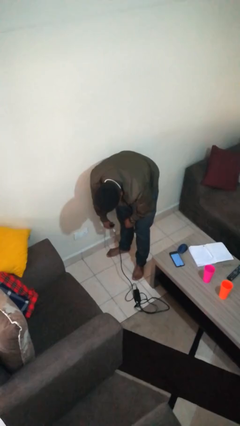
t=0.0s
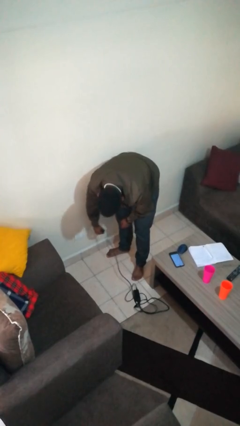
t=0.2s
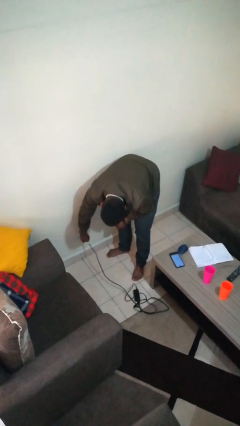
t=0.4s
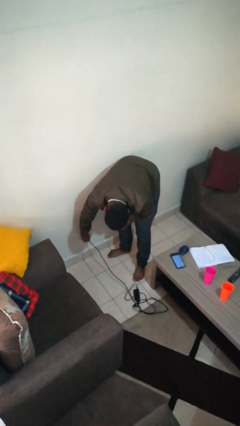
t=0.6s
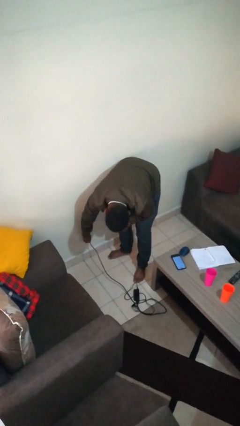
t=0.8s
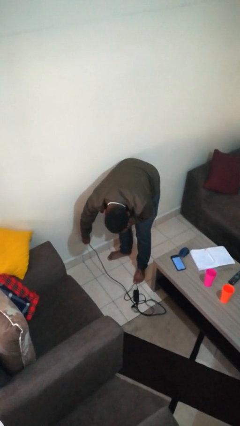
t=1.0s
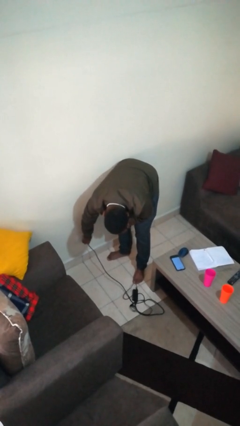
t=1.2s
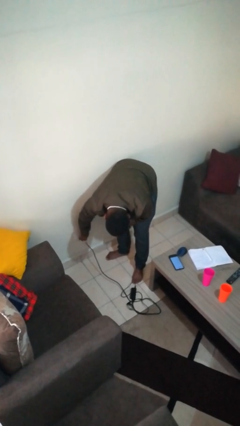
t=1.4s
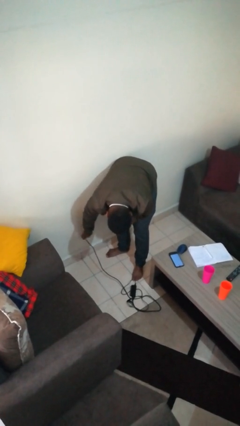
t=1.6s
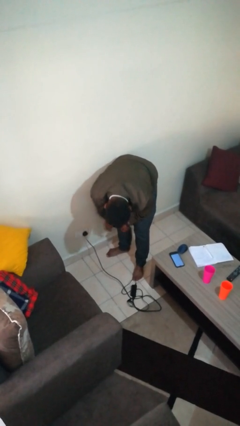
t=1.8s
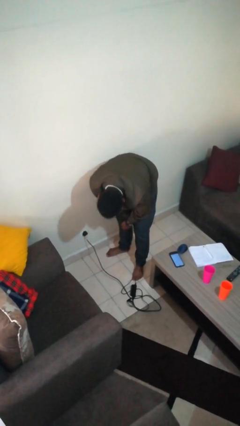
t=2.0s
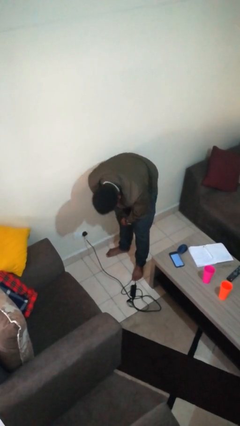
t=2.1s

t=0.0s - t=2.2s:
person plugs into electrical socket

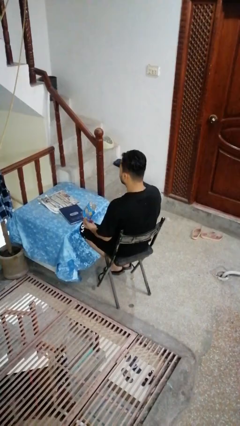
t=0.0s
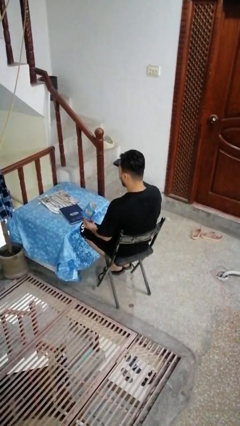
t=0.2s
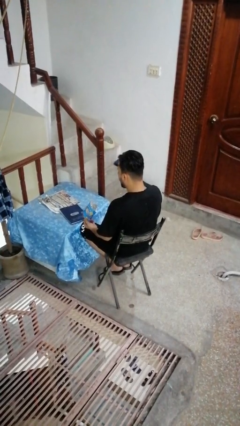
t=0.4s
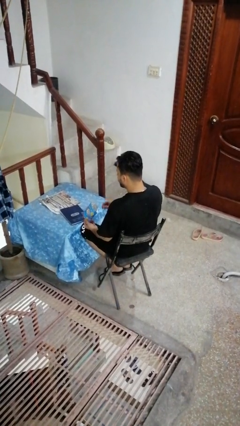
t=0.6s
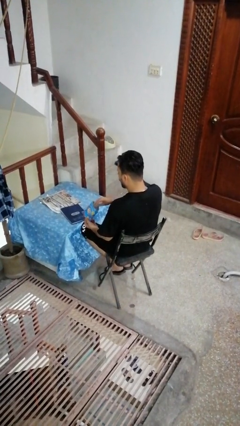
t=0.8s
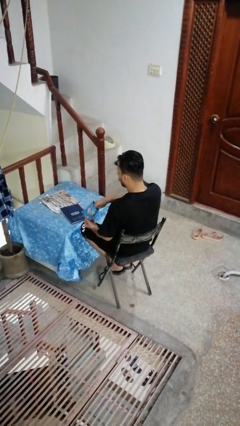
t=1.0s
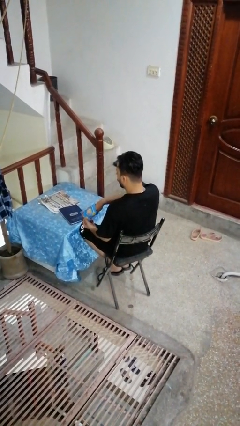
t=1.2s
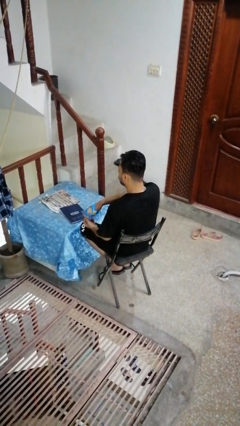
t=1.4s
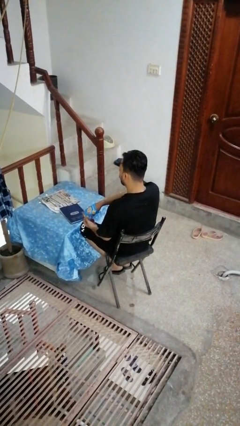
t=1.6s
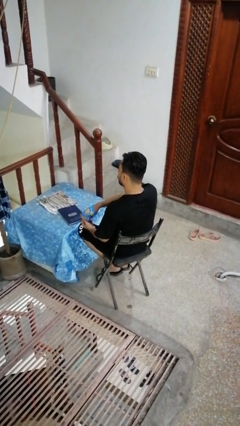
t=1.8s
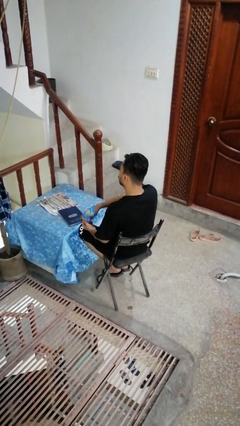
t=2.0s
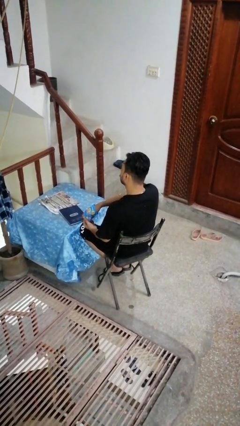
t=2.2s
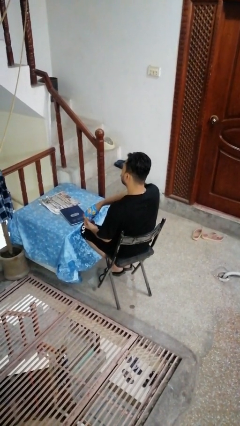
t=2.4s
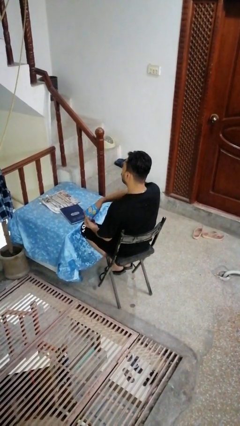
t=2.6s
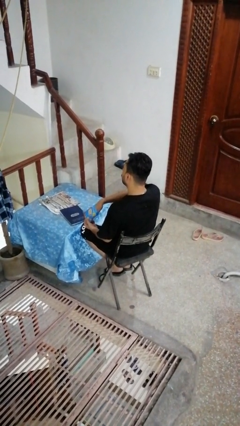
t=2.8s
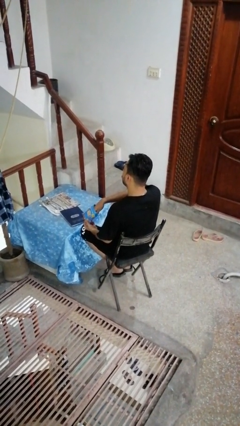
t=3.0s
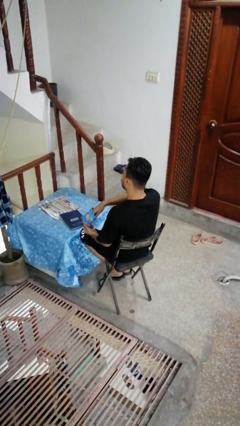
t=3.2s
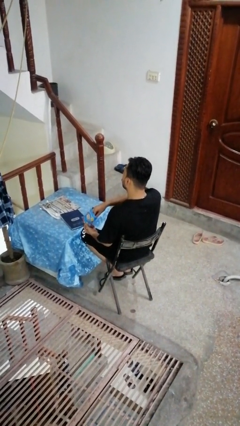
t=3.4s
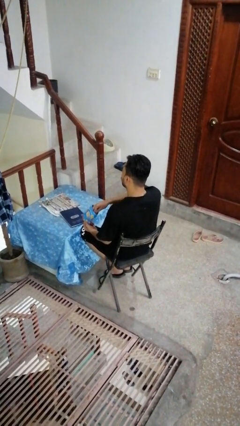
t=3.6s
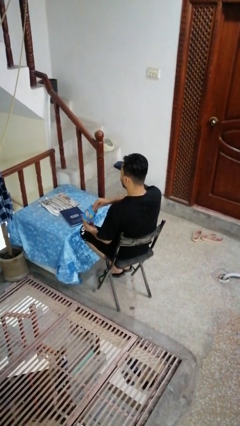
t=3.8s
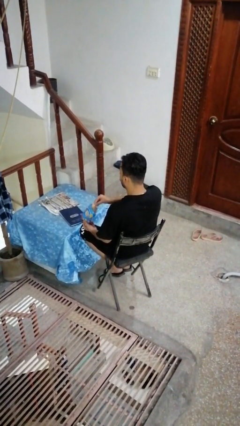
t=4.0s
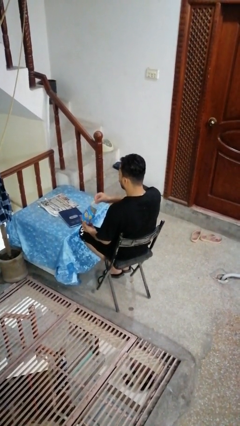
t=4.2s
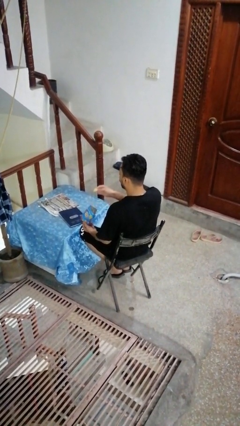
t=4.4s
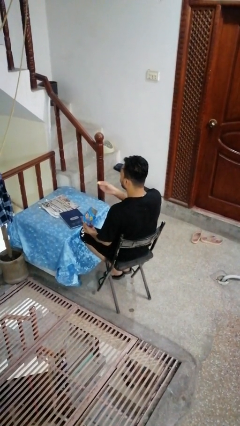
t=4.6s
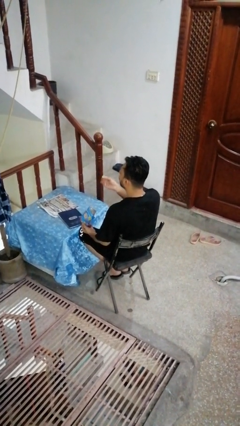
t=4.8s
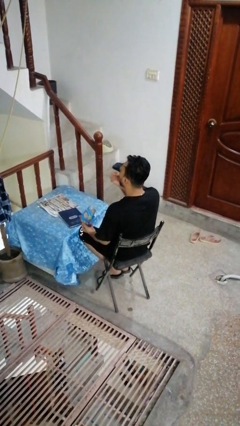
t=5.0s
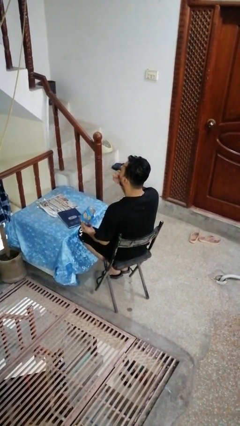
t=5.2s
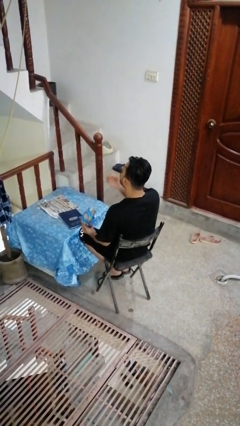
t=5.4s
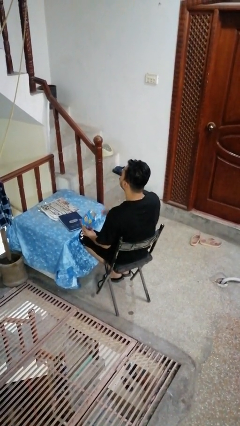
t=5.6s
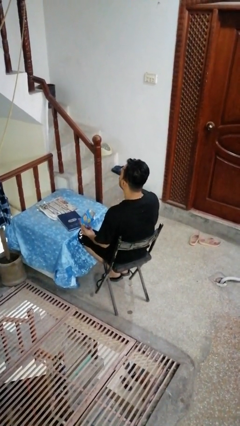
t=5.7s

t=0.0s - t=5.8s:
person eats snack from bag

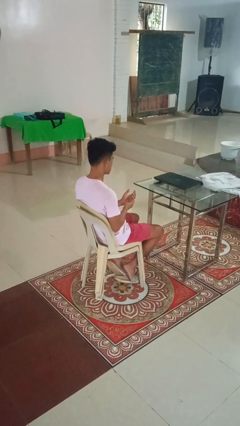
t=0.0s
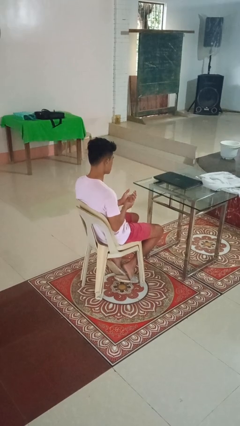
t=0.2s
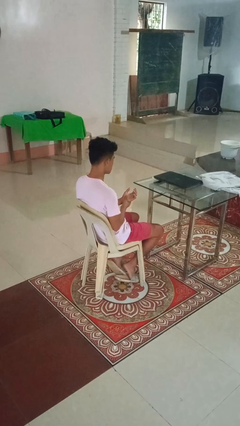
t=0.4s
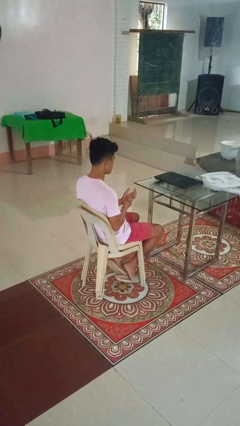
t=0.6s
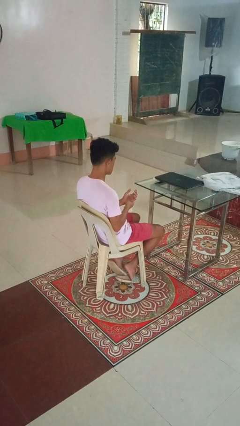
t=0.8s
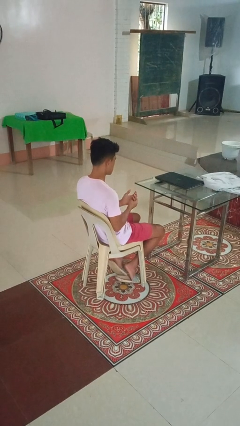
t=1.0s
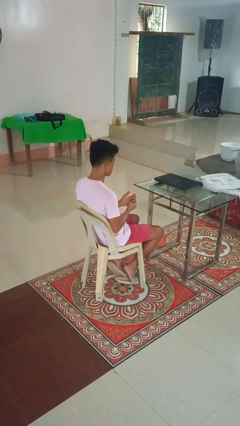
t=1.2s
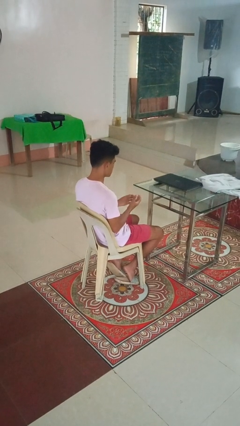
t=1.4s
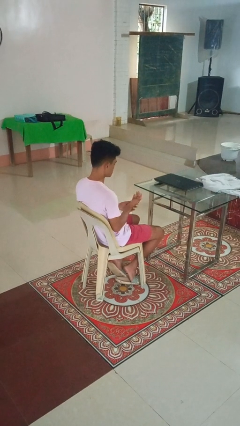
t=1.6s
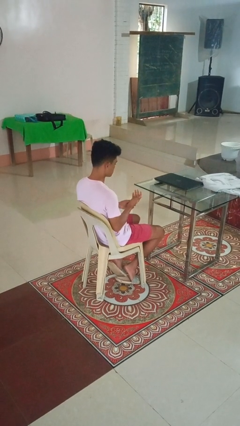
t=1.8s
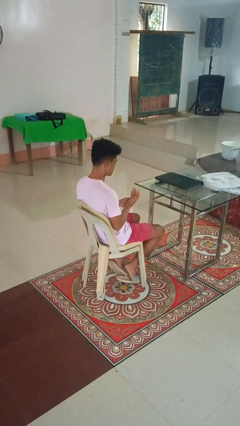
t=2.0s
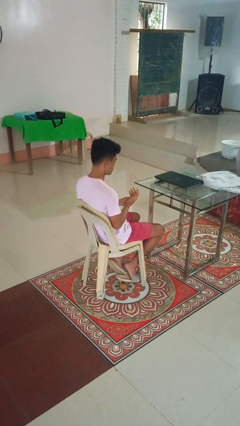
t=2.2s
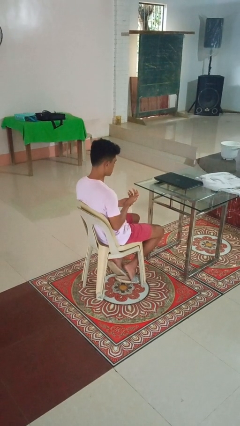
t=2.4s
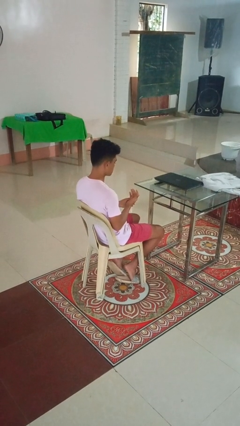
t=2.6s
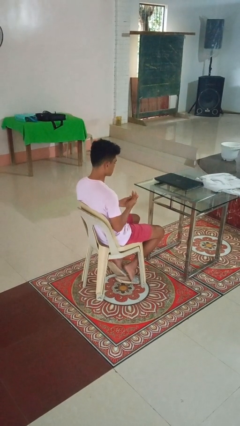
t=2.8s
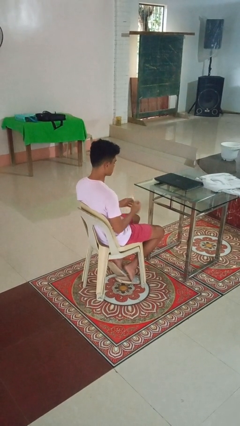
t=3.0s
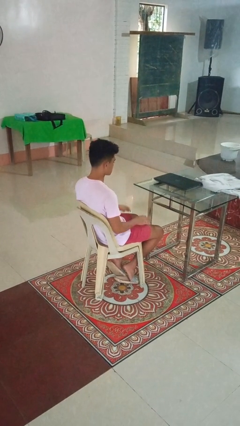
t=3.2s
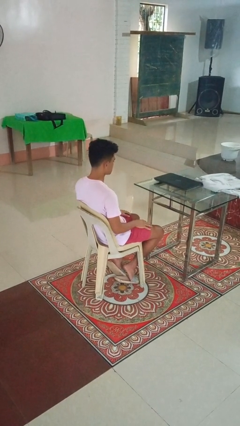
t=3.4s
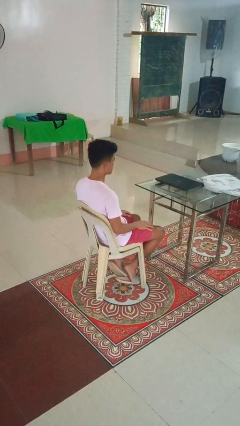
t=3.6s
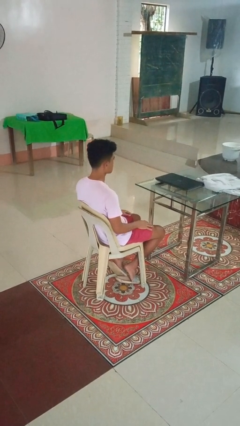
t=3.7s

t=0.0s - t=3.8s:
person looks at hands in lap

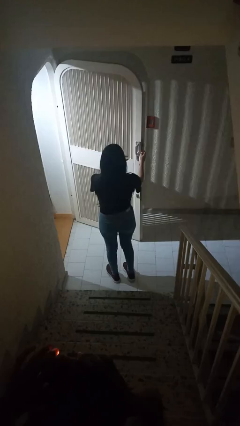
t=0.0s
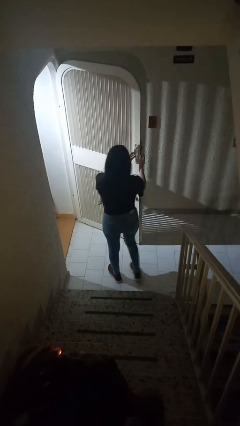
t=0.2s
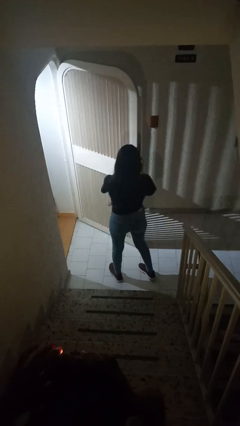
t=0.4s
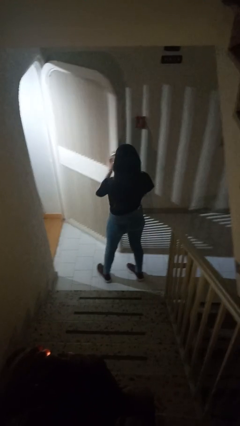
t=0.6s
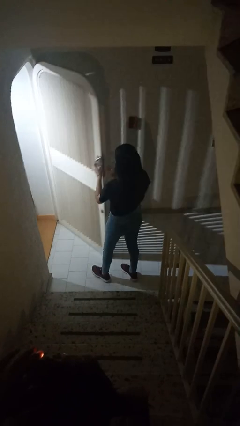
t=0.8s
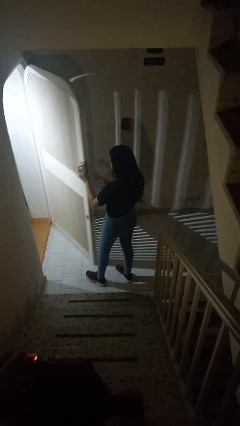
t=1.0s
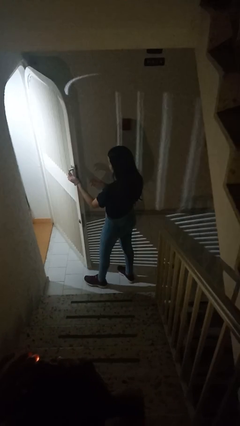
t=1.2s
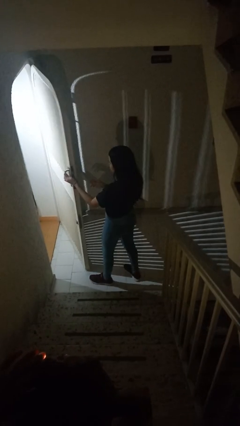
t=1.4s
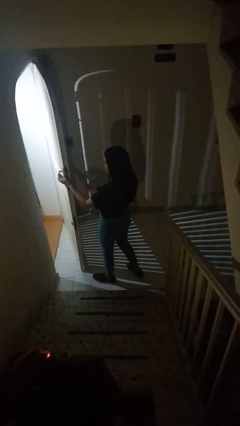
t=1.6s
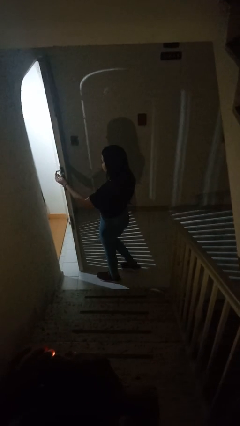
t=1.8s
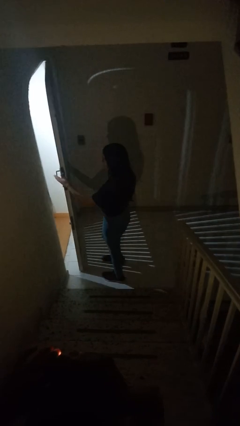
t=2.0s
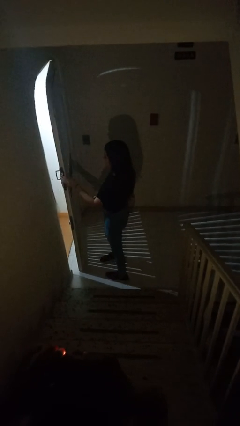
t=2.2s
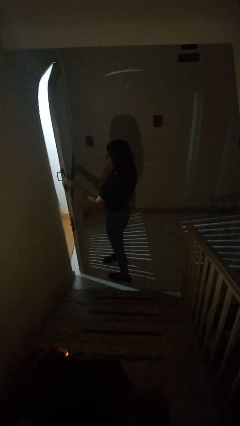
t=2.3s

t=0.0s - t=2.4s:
person closes facility door

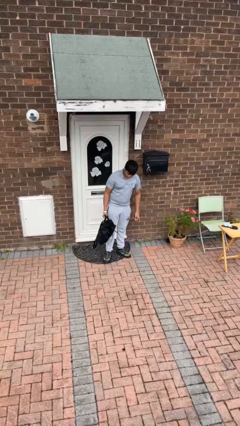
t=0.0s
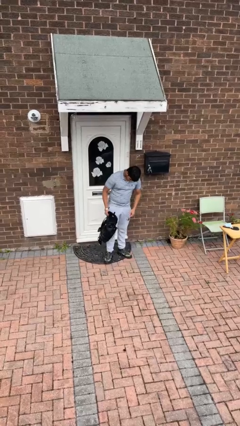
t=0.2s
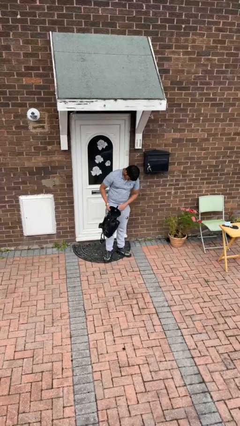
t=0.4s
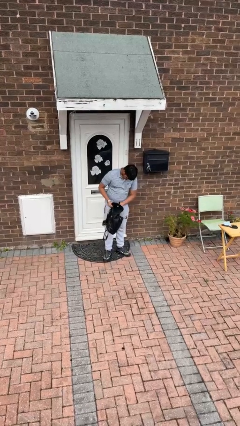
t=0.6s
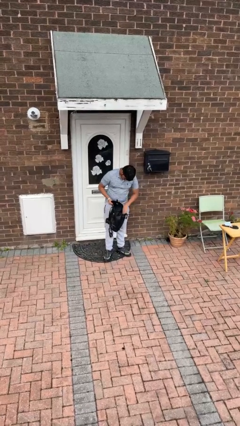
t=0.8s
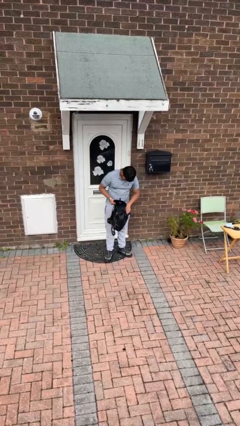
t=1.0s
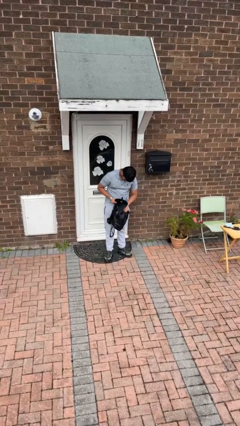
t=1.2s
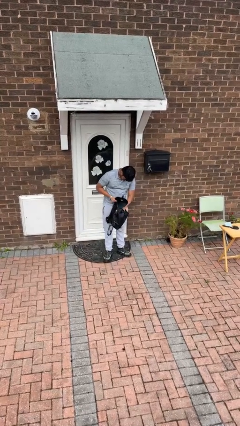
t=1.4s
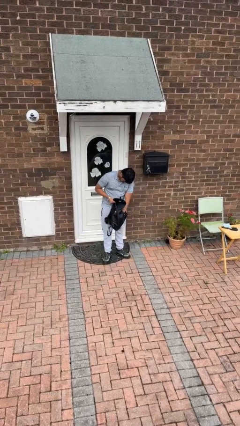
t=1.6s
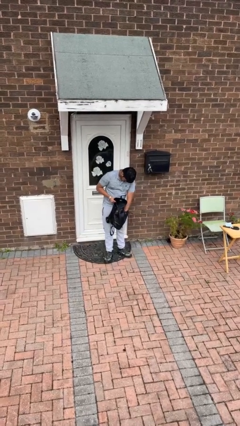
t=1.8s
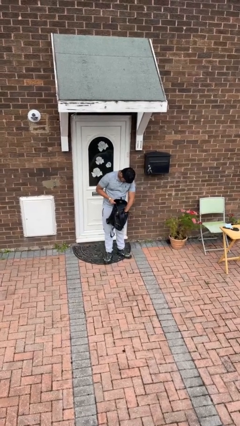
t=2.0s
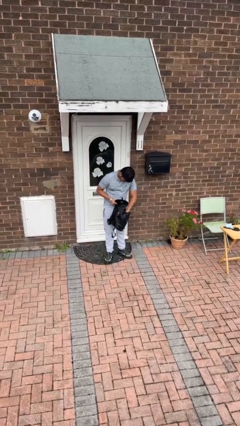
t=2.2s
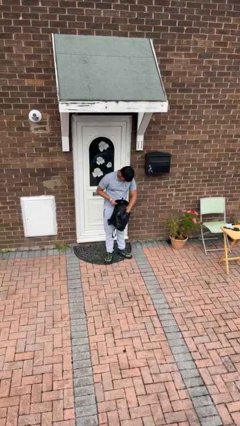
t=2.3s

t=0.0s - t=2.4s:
person searches in backpack

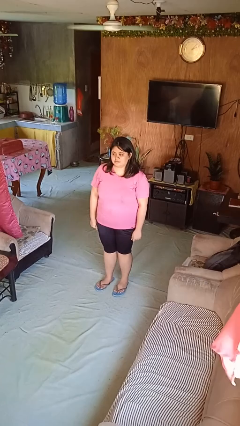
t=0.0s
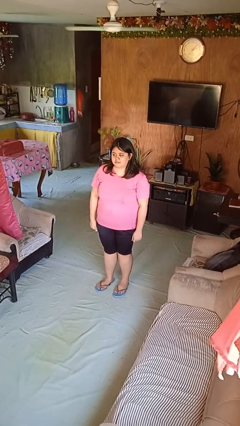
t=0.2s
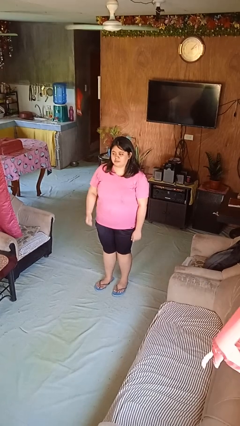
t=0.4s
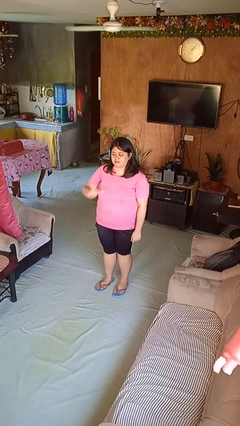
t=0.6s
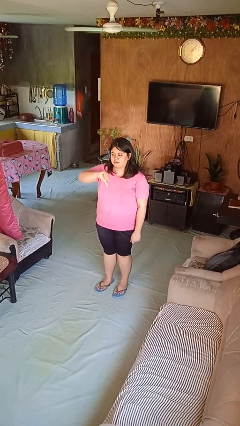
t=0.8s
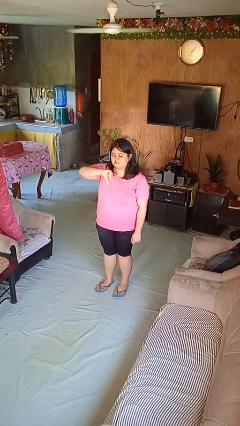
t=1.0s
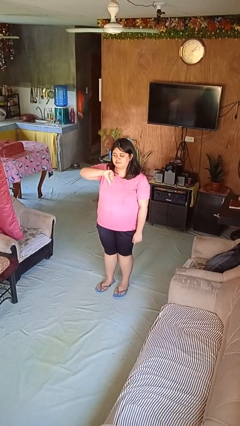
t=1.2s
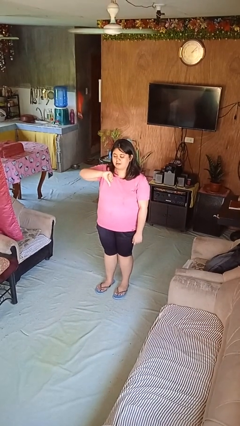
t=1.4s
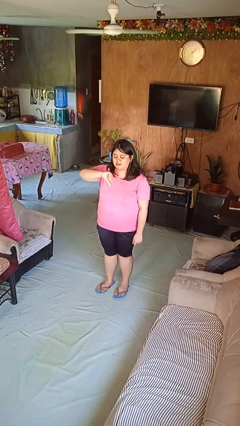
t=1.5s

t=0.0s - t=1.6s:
person gestures thumbs down
